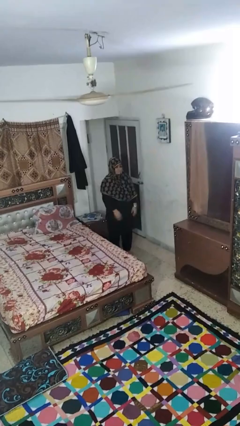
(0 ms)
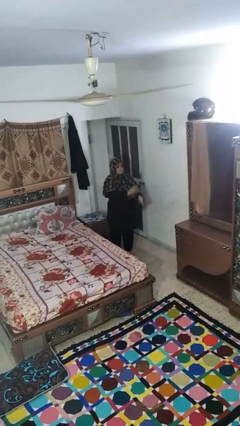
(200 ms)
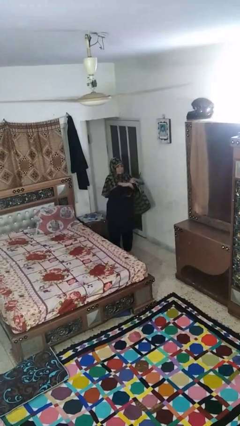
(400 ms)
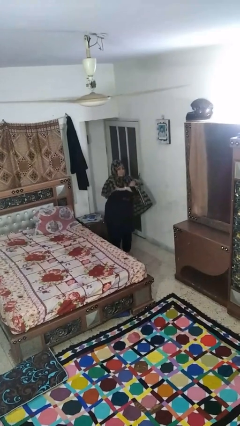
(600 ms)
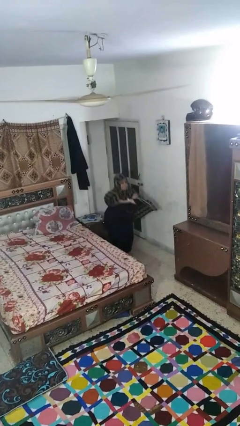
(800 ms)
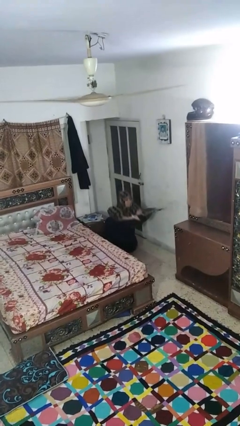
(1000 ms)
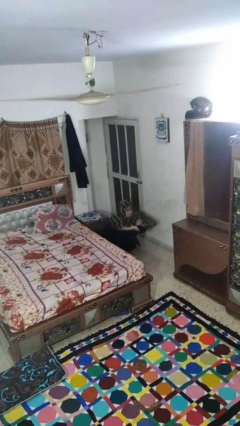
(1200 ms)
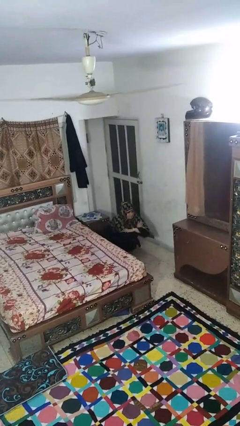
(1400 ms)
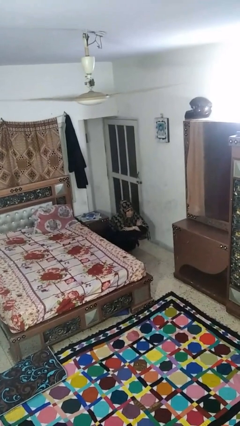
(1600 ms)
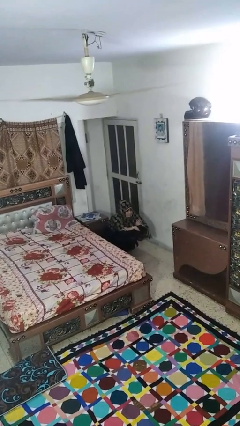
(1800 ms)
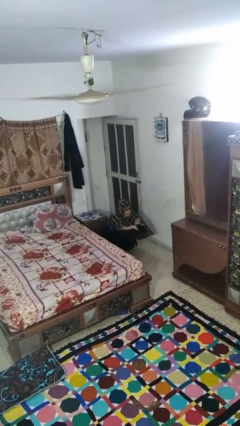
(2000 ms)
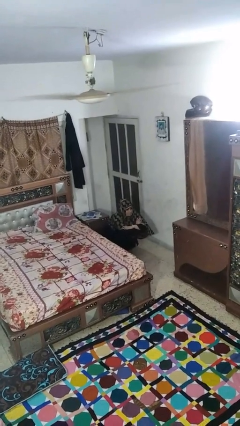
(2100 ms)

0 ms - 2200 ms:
person squats

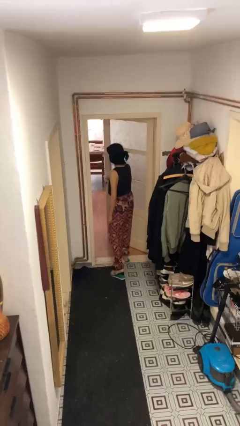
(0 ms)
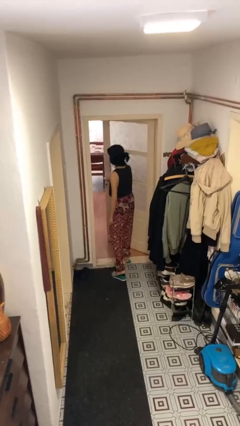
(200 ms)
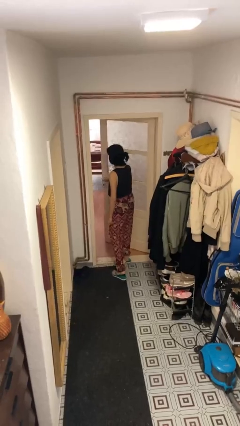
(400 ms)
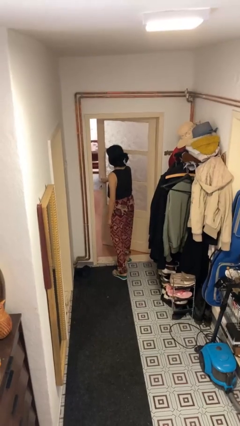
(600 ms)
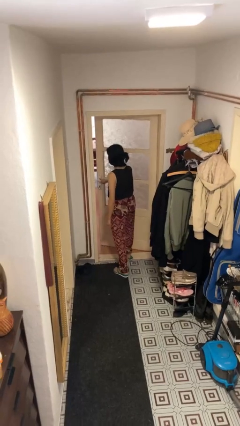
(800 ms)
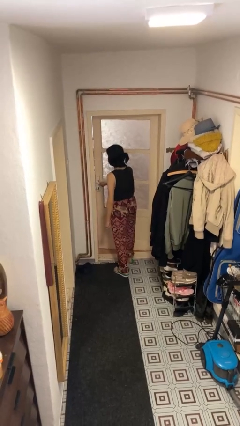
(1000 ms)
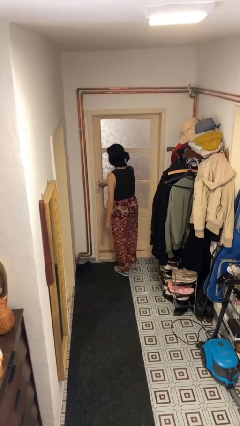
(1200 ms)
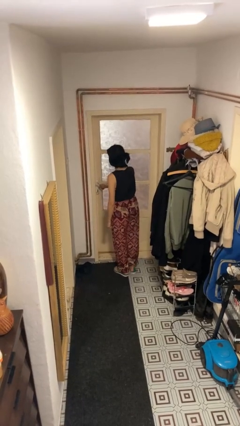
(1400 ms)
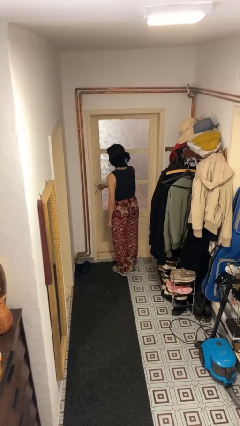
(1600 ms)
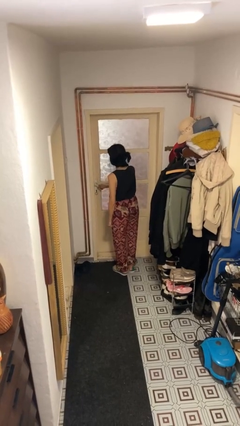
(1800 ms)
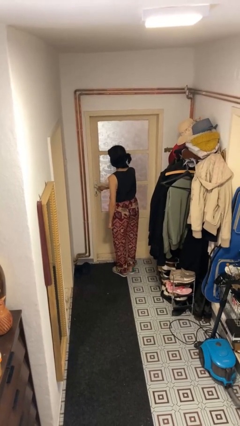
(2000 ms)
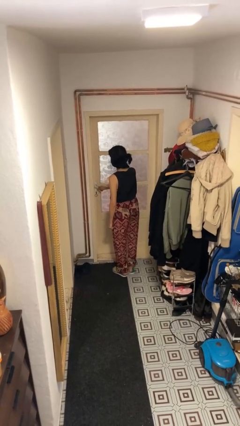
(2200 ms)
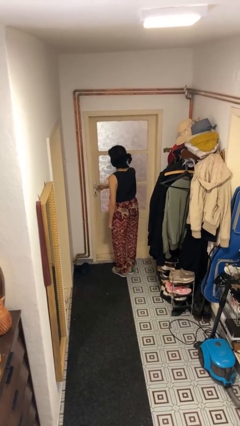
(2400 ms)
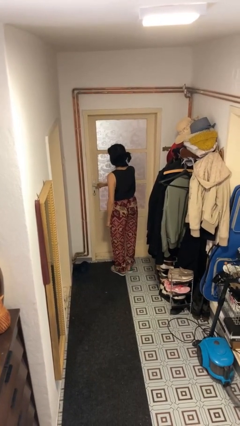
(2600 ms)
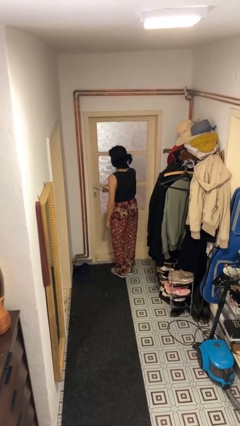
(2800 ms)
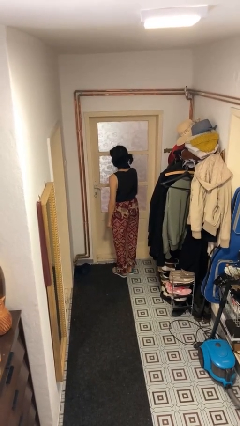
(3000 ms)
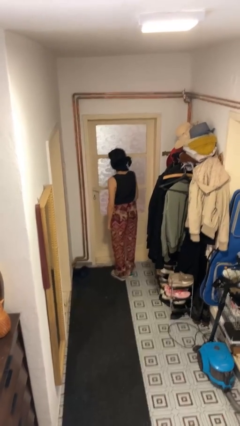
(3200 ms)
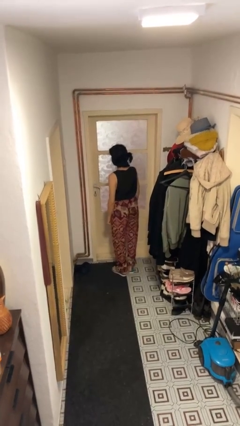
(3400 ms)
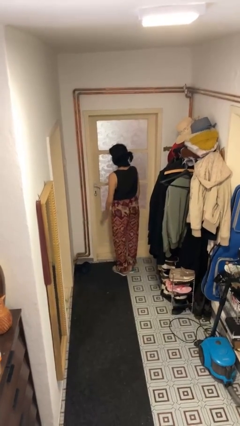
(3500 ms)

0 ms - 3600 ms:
person closes facility door

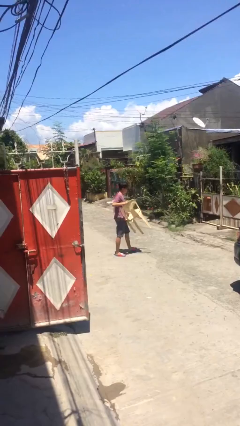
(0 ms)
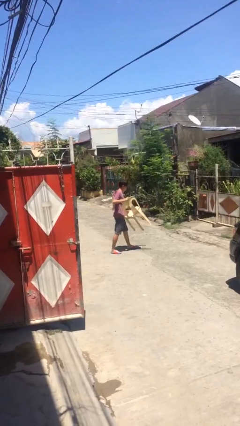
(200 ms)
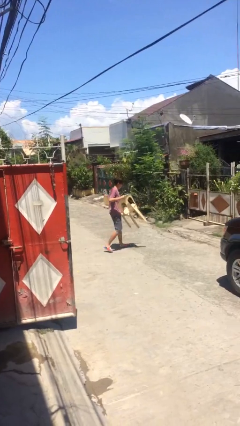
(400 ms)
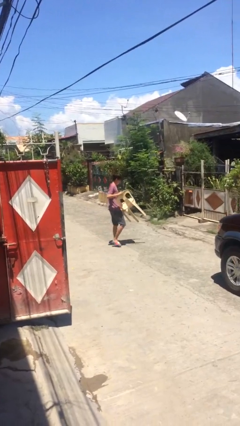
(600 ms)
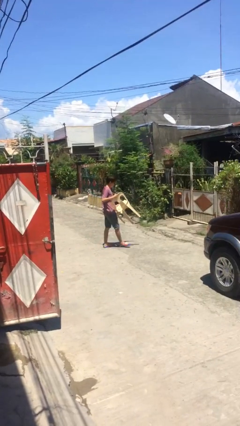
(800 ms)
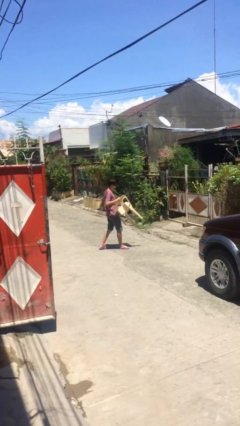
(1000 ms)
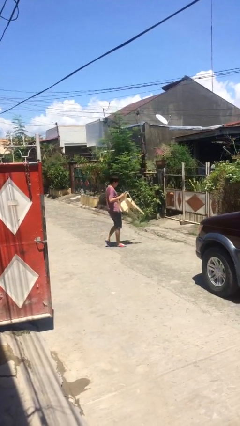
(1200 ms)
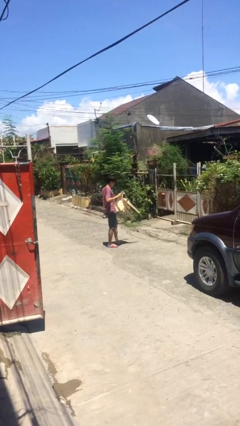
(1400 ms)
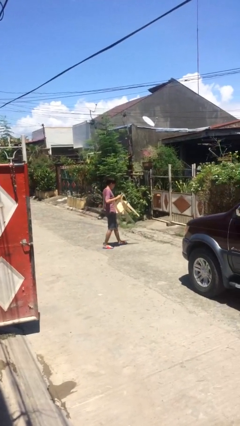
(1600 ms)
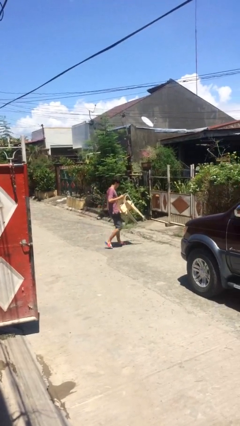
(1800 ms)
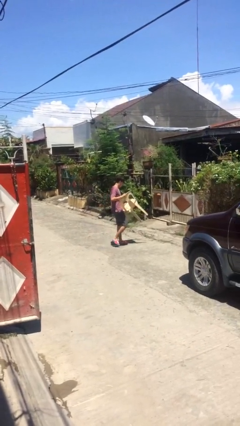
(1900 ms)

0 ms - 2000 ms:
person carries heavy object

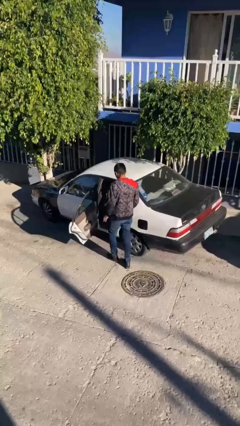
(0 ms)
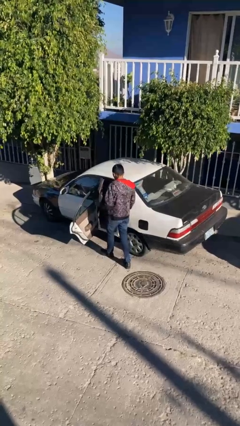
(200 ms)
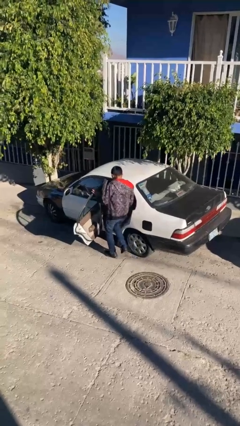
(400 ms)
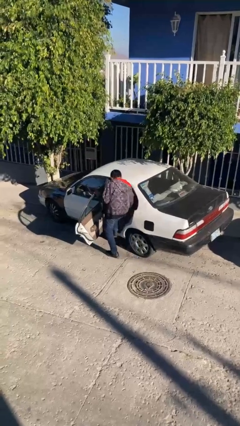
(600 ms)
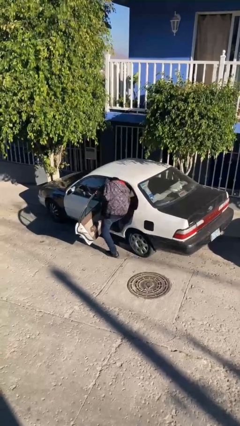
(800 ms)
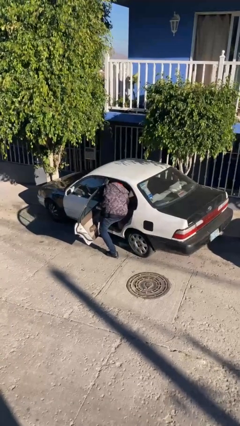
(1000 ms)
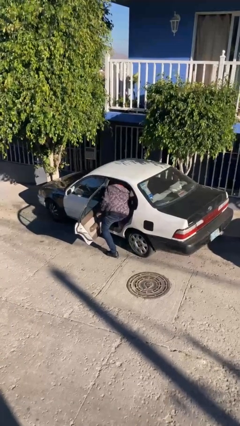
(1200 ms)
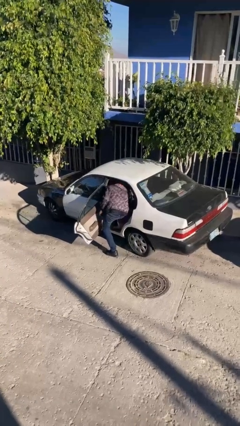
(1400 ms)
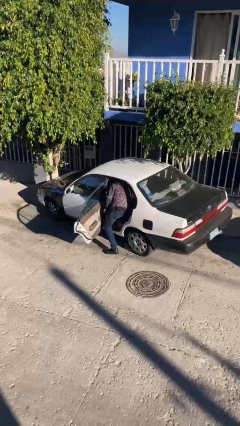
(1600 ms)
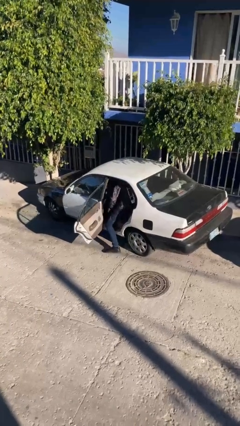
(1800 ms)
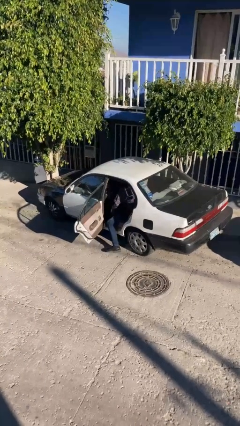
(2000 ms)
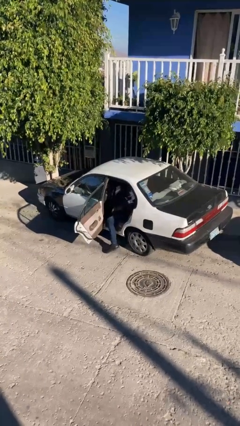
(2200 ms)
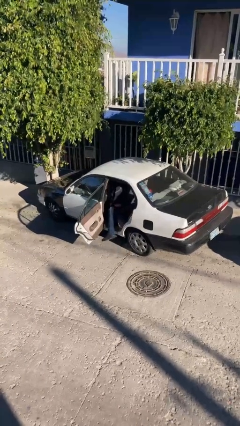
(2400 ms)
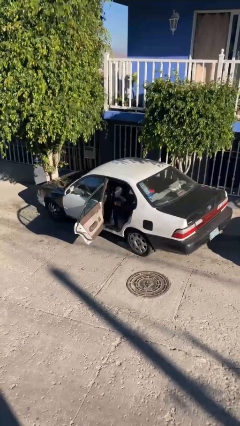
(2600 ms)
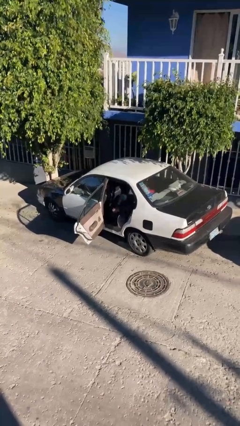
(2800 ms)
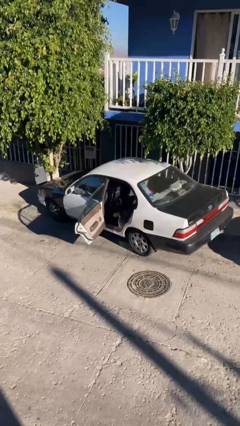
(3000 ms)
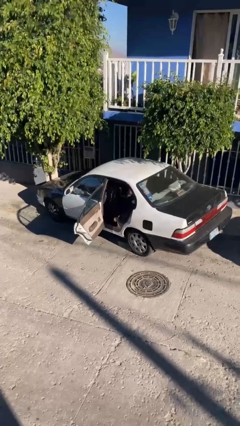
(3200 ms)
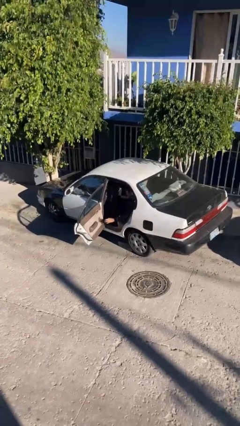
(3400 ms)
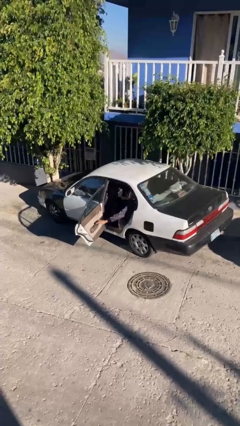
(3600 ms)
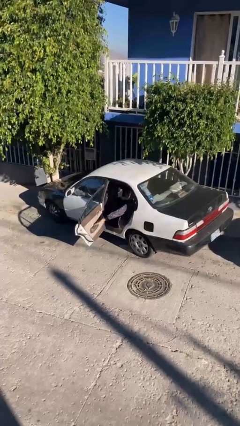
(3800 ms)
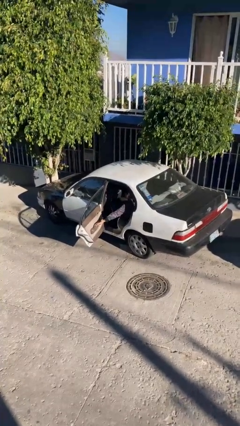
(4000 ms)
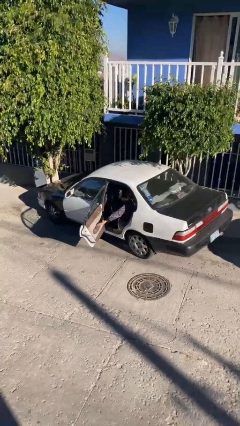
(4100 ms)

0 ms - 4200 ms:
person enters car

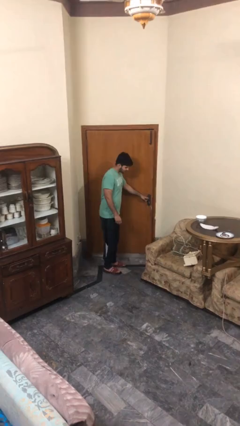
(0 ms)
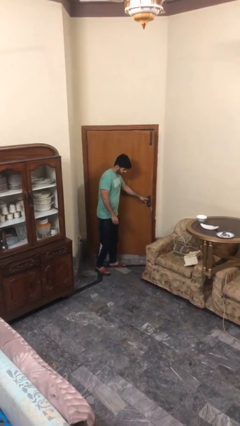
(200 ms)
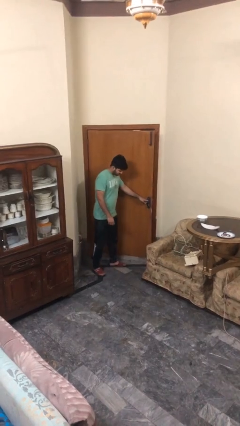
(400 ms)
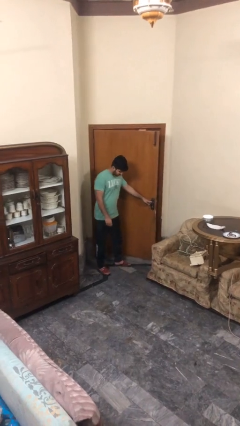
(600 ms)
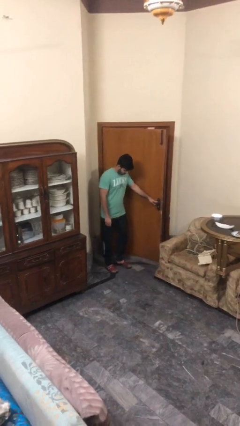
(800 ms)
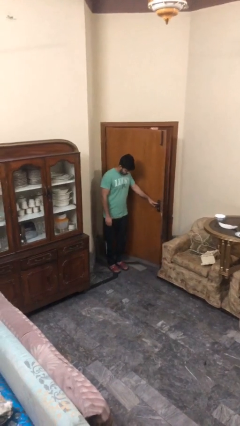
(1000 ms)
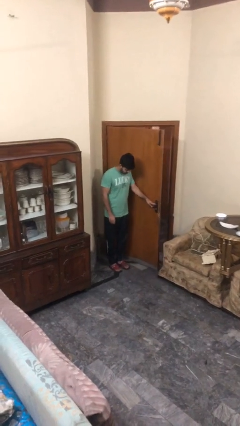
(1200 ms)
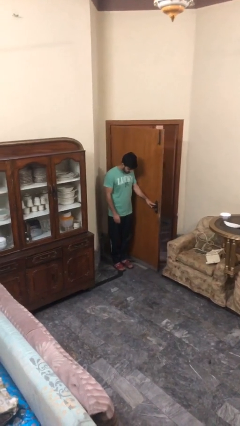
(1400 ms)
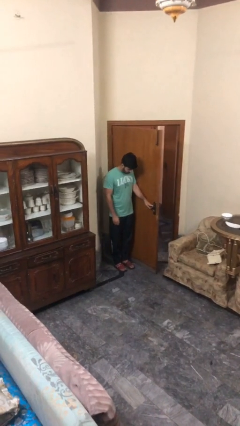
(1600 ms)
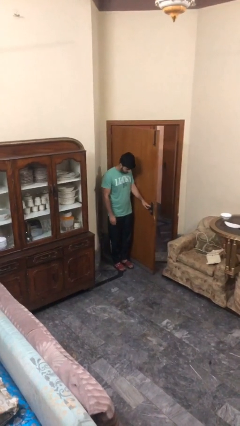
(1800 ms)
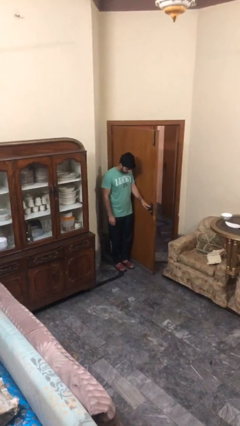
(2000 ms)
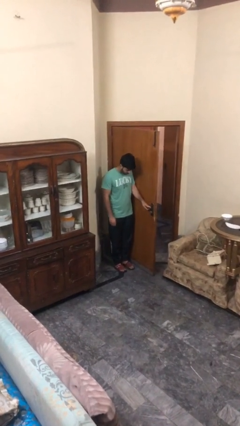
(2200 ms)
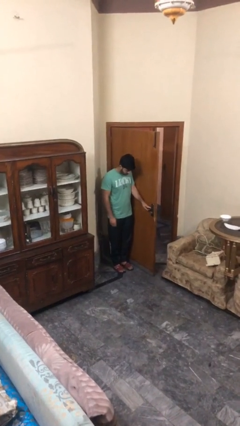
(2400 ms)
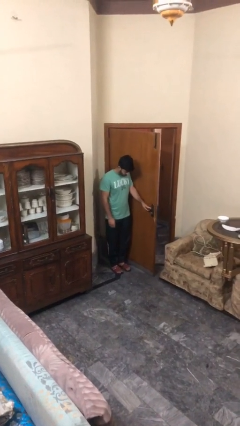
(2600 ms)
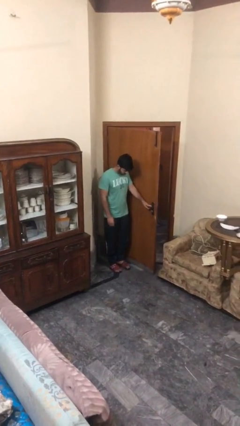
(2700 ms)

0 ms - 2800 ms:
person opens facility door

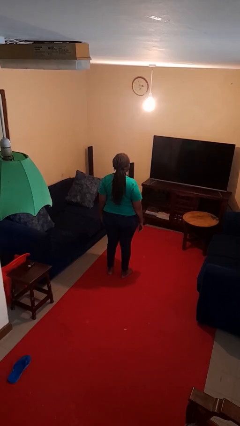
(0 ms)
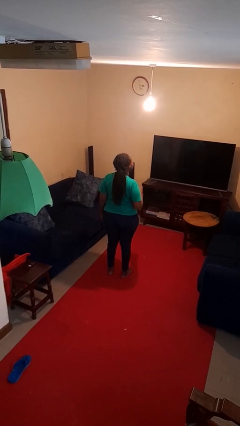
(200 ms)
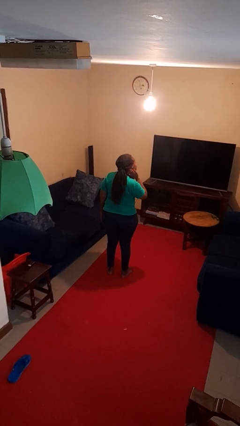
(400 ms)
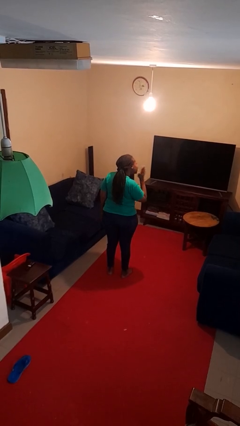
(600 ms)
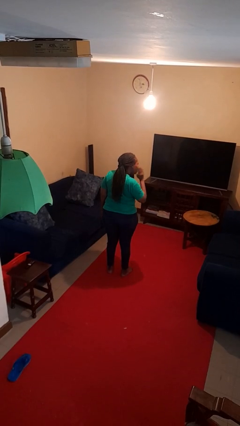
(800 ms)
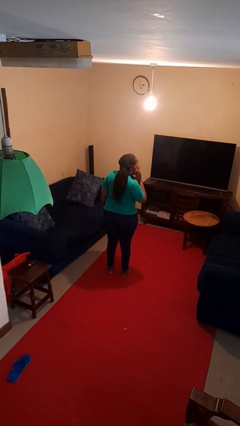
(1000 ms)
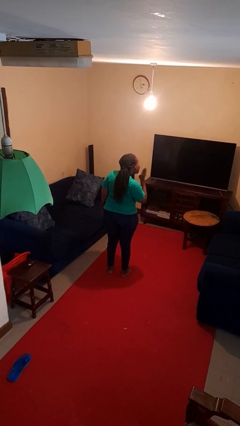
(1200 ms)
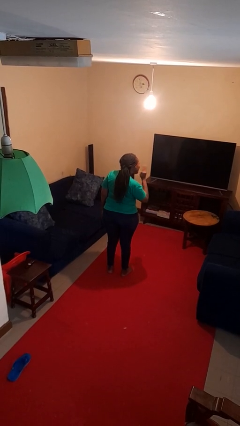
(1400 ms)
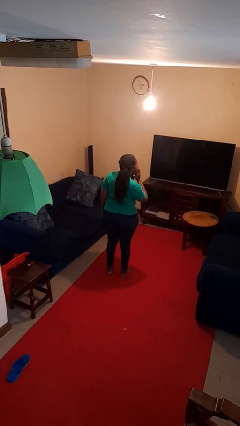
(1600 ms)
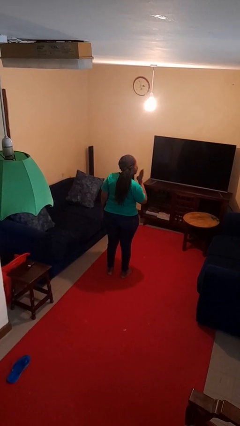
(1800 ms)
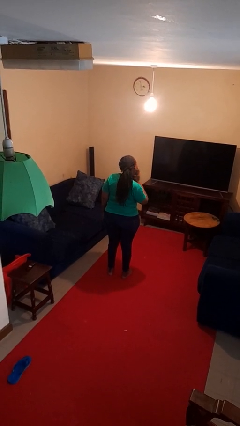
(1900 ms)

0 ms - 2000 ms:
person swats bug

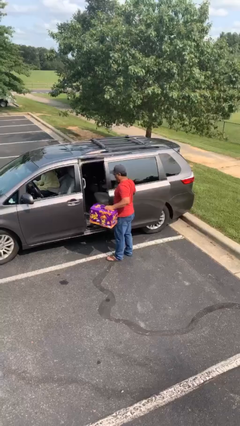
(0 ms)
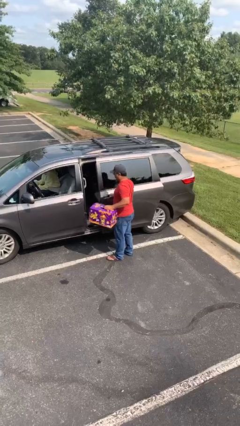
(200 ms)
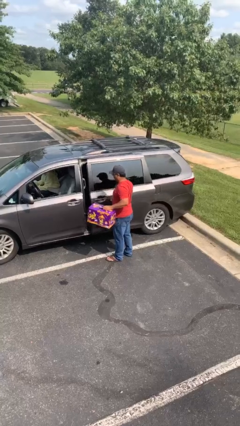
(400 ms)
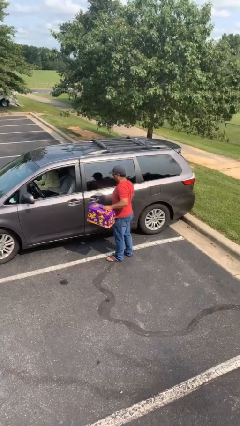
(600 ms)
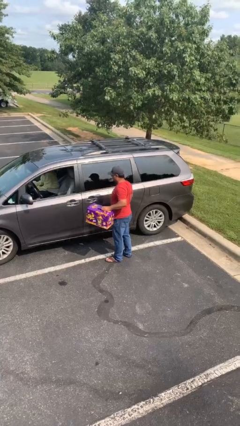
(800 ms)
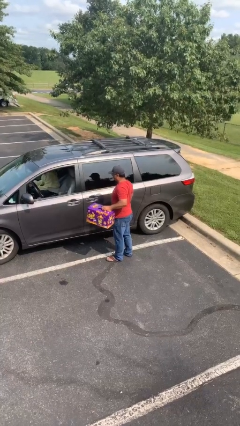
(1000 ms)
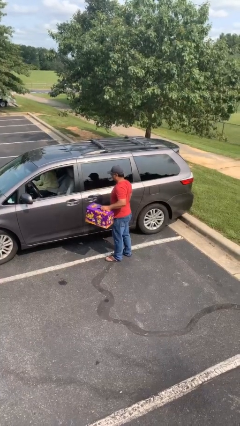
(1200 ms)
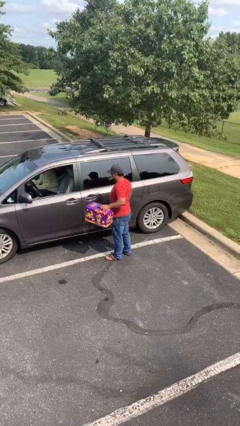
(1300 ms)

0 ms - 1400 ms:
person closes car door
